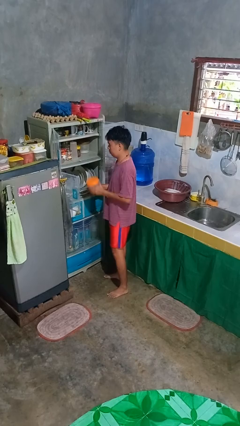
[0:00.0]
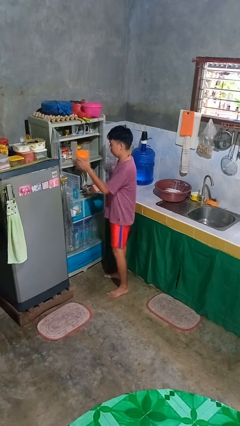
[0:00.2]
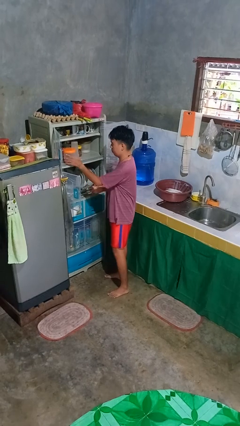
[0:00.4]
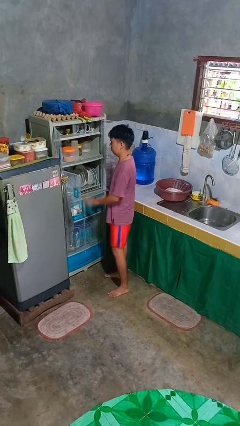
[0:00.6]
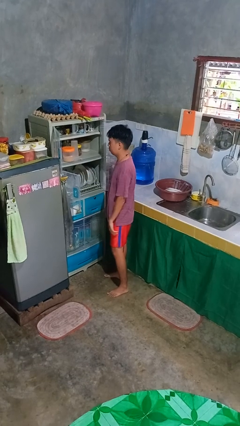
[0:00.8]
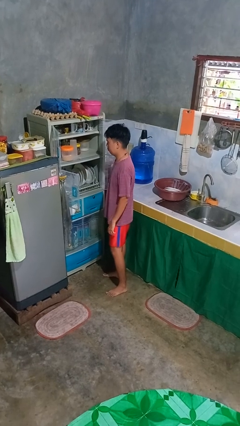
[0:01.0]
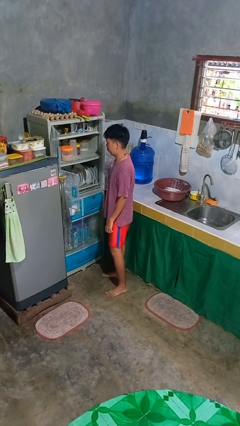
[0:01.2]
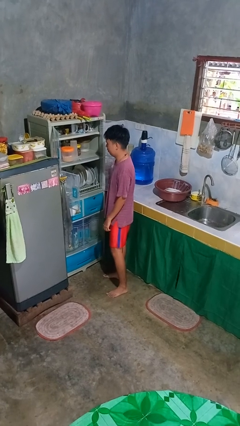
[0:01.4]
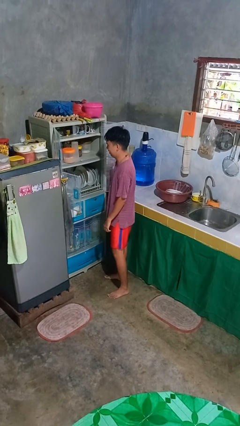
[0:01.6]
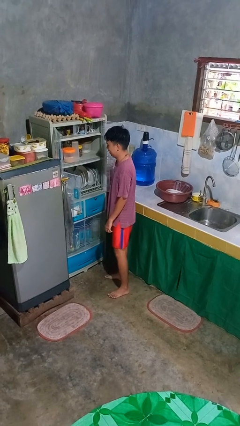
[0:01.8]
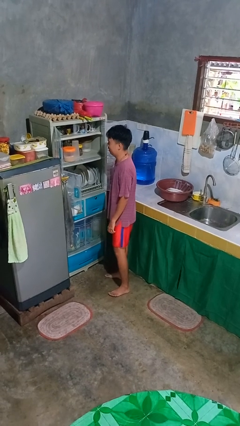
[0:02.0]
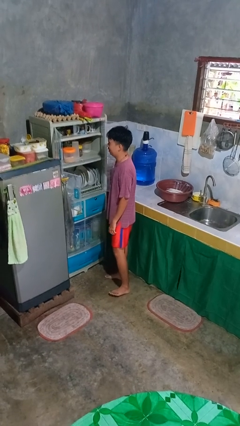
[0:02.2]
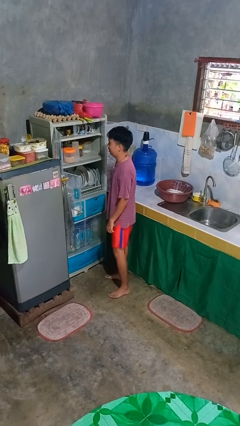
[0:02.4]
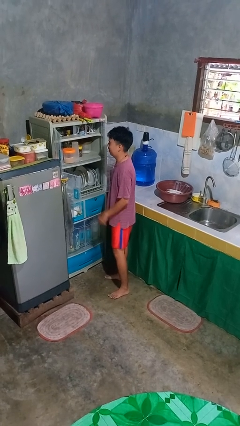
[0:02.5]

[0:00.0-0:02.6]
person puts object in cabinet

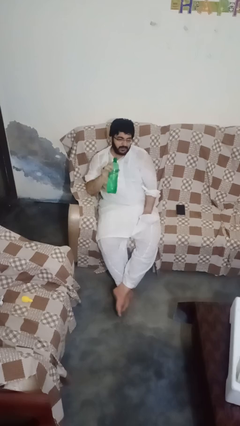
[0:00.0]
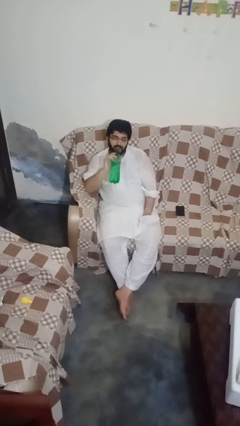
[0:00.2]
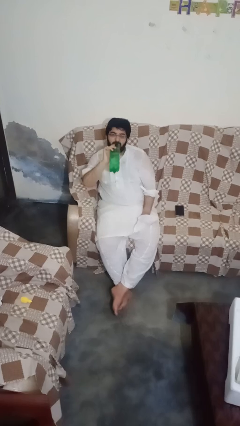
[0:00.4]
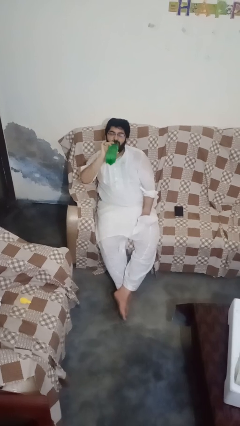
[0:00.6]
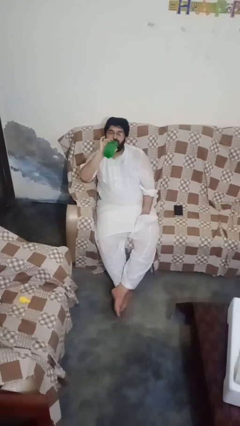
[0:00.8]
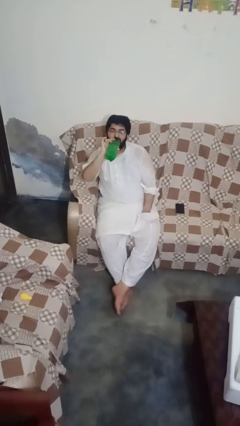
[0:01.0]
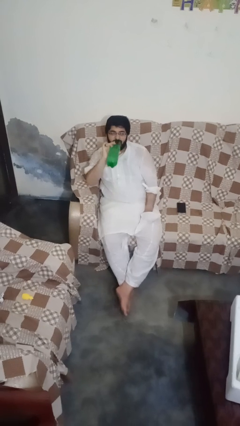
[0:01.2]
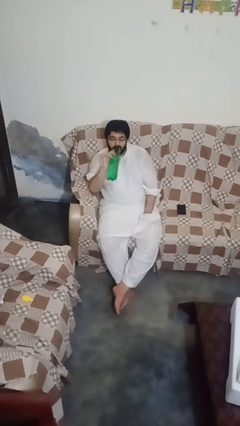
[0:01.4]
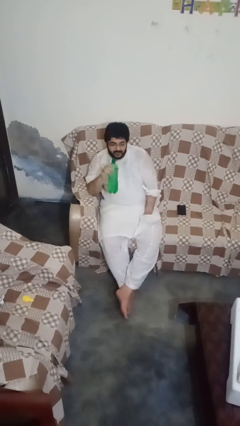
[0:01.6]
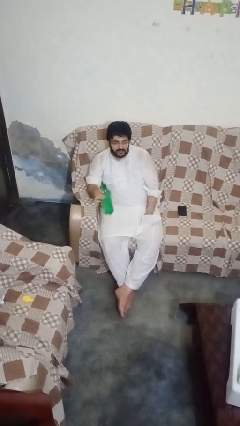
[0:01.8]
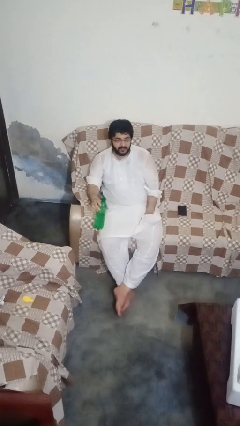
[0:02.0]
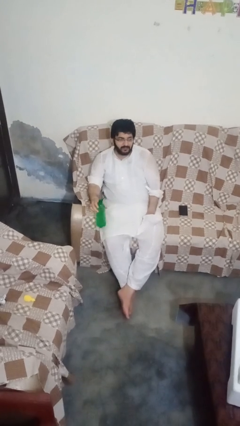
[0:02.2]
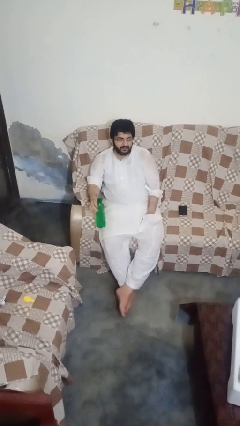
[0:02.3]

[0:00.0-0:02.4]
person drinks from bottle

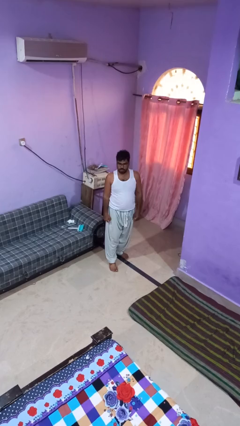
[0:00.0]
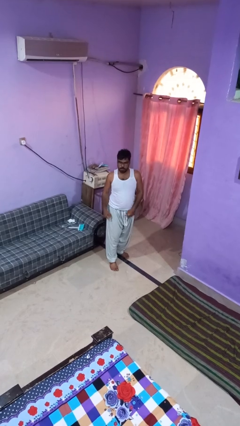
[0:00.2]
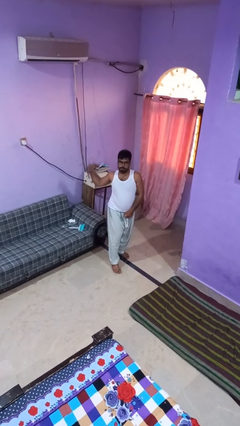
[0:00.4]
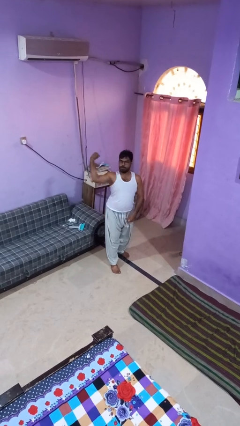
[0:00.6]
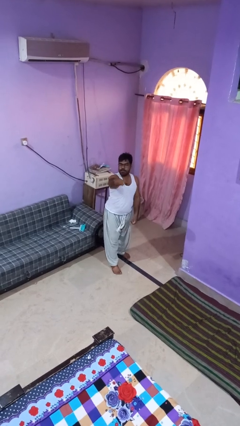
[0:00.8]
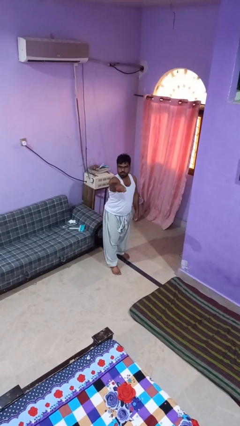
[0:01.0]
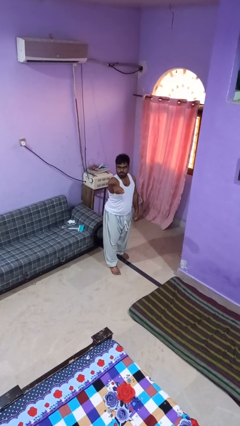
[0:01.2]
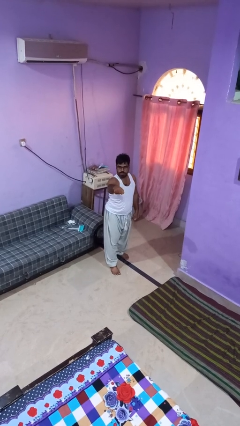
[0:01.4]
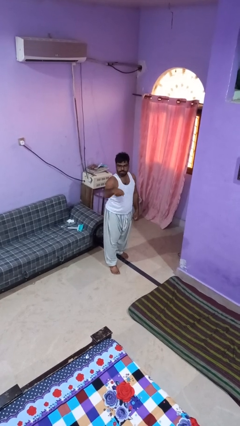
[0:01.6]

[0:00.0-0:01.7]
person punches

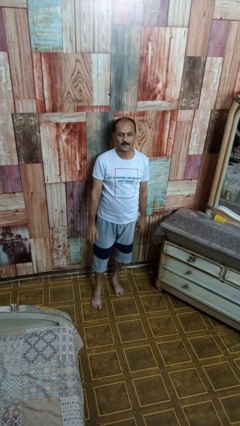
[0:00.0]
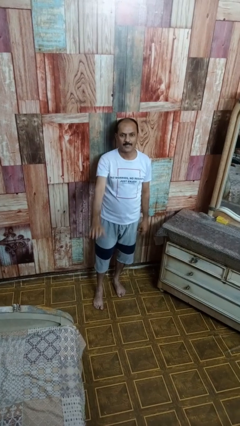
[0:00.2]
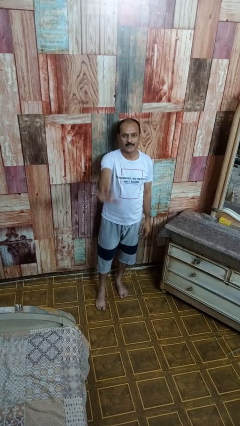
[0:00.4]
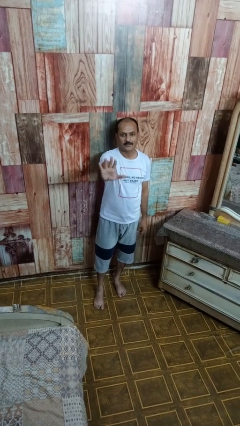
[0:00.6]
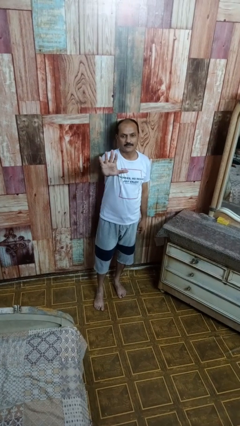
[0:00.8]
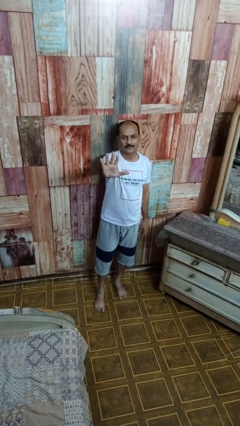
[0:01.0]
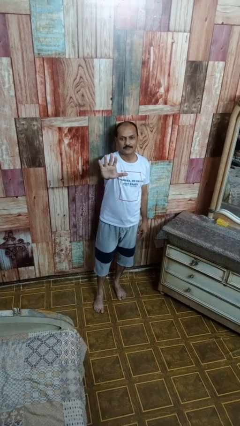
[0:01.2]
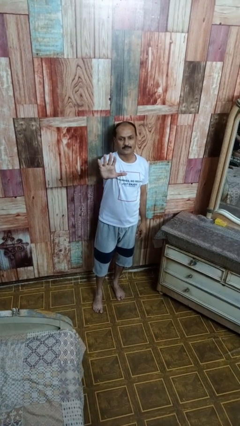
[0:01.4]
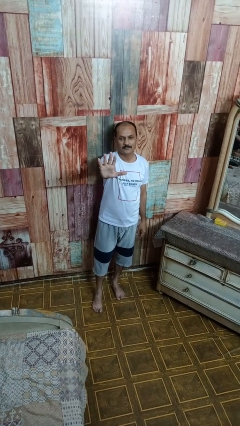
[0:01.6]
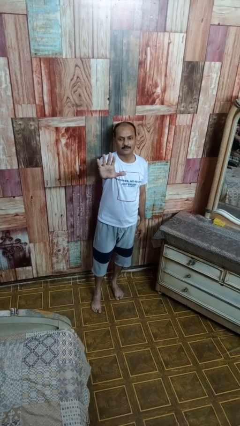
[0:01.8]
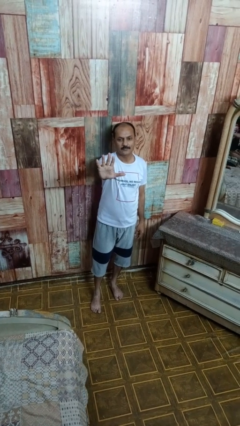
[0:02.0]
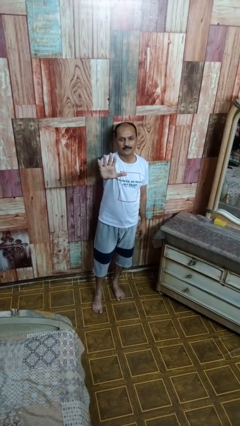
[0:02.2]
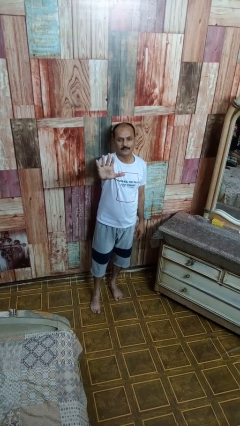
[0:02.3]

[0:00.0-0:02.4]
person gestures number five

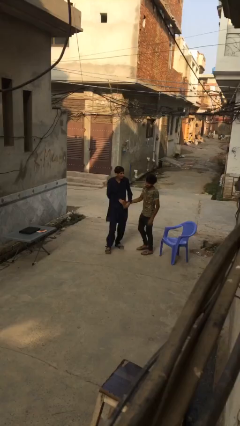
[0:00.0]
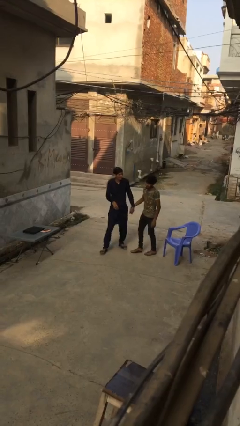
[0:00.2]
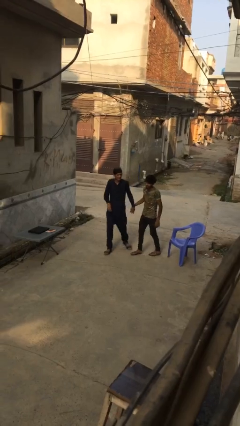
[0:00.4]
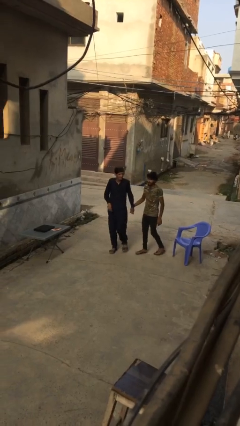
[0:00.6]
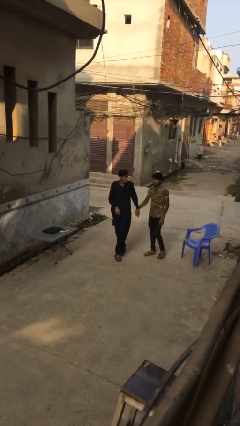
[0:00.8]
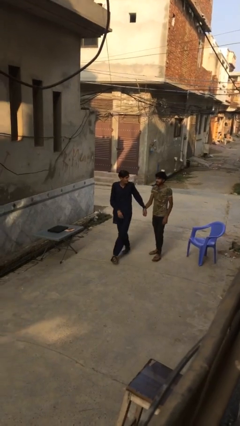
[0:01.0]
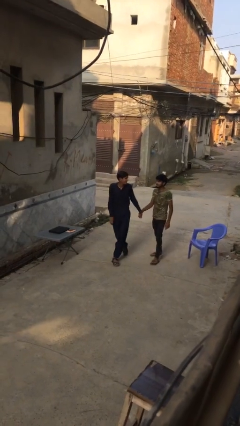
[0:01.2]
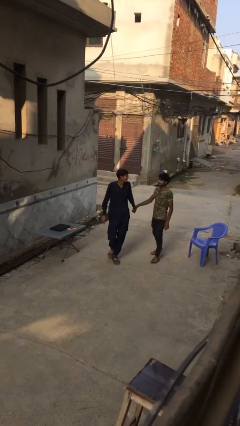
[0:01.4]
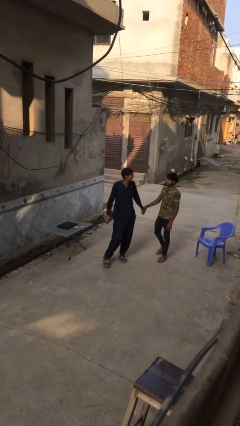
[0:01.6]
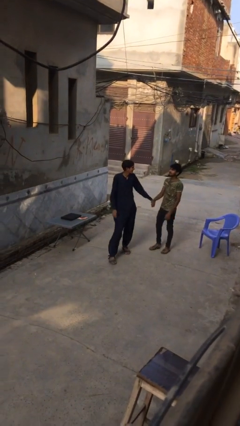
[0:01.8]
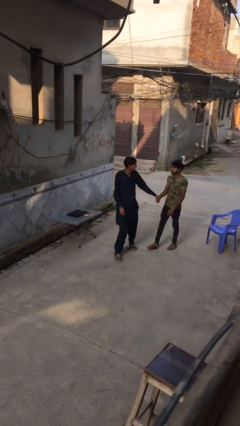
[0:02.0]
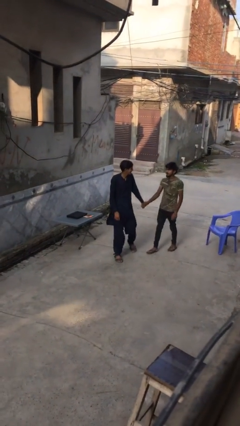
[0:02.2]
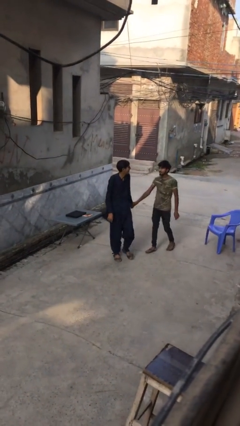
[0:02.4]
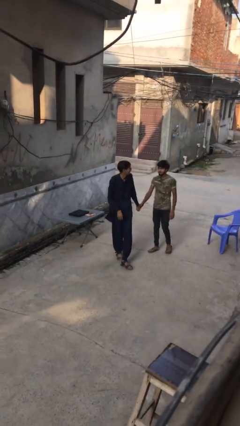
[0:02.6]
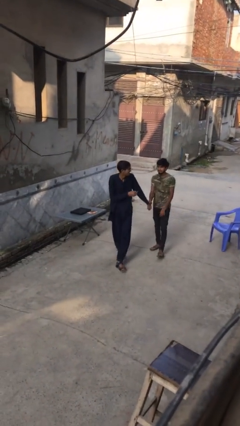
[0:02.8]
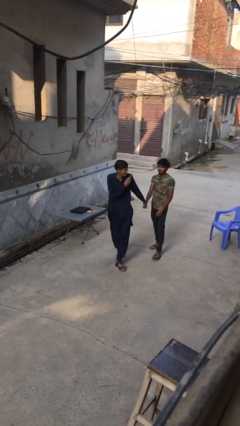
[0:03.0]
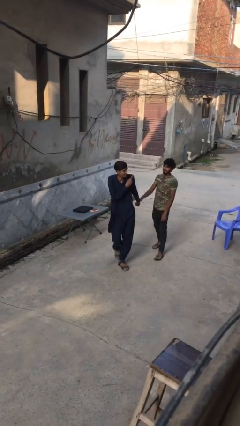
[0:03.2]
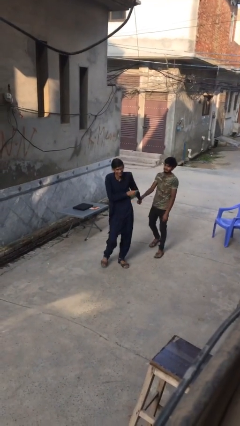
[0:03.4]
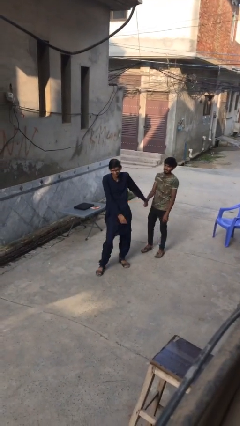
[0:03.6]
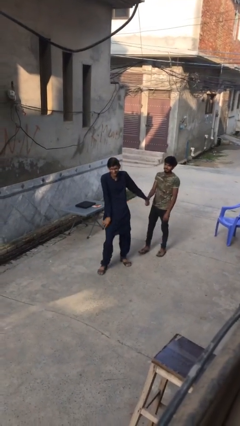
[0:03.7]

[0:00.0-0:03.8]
person talks to person

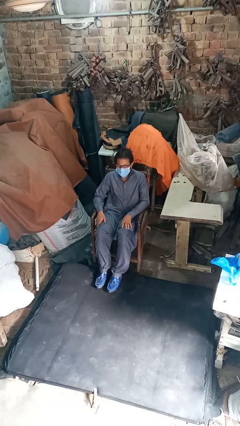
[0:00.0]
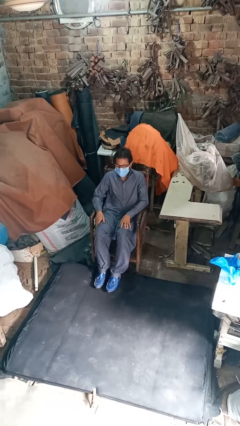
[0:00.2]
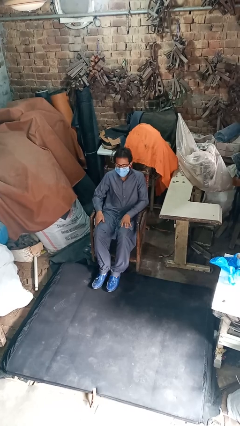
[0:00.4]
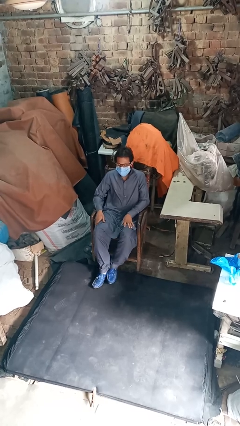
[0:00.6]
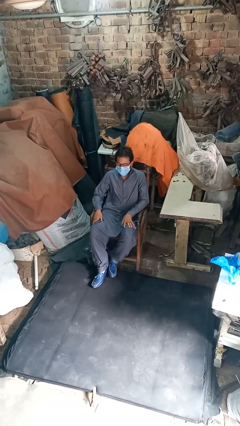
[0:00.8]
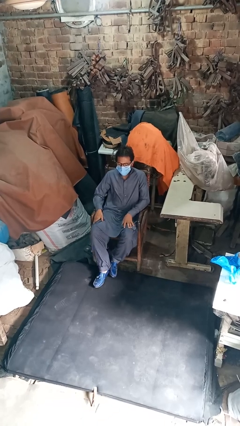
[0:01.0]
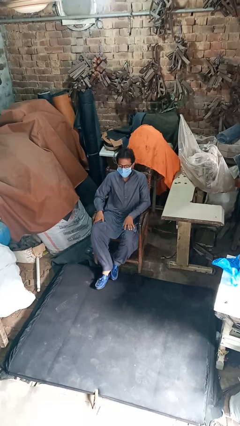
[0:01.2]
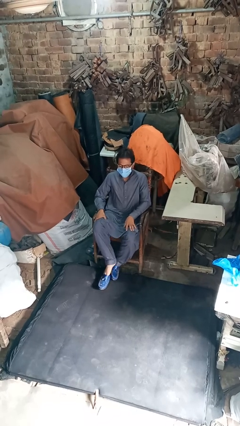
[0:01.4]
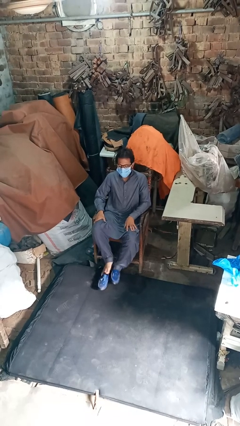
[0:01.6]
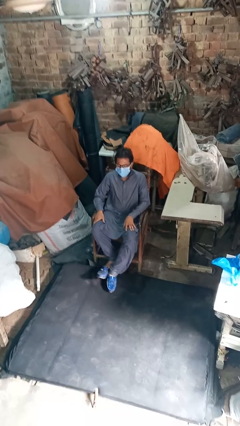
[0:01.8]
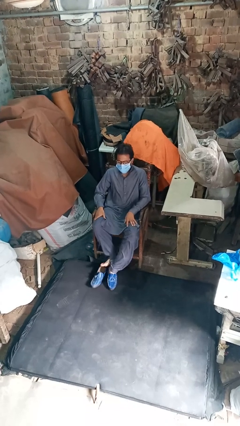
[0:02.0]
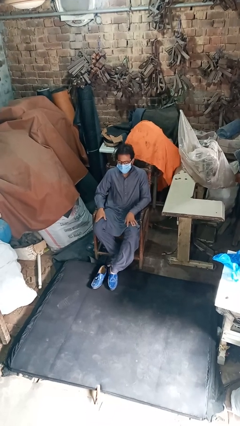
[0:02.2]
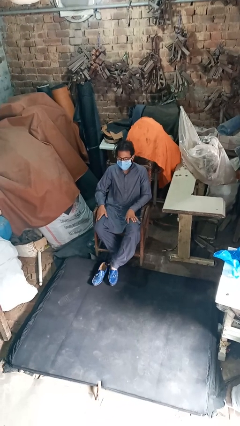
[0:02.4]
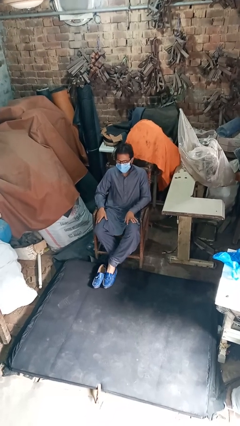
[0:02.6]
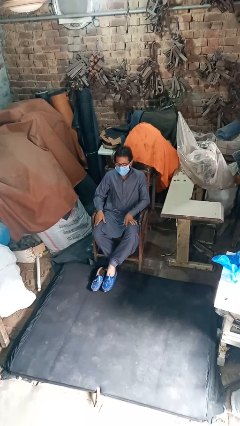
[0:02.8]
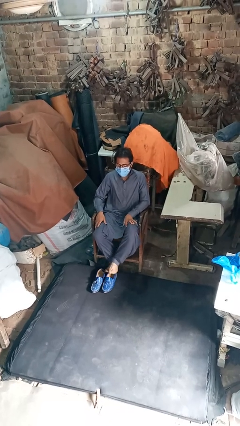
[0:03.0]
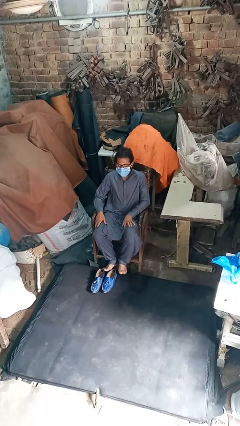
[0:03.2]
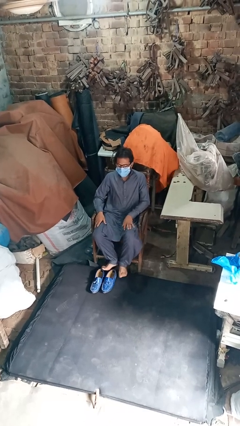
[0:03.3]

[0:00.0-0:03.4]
person takes off shoes

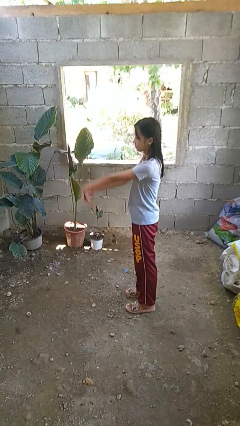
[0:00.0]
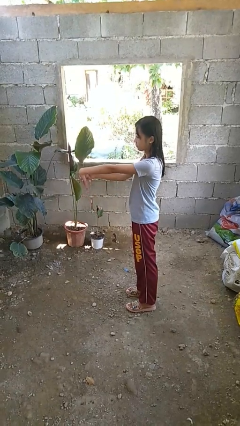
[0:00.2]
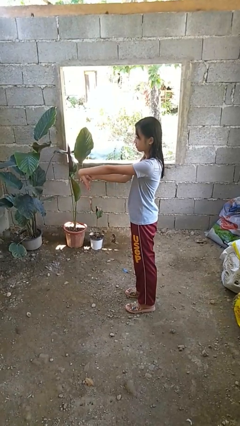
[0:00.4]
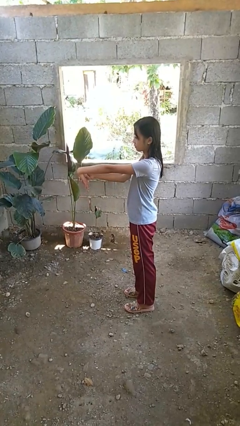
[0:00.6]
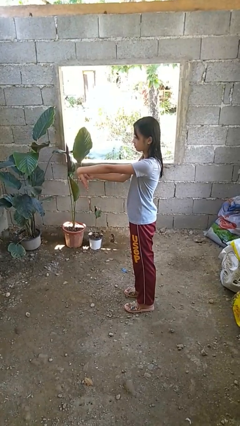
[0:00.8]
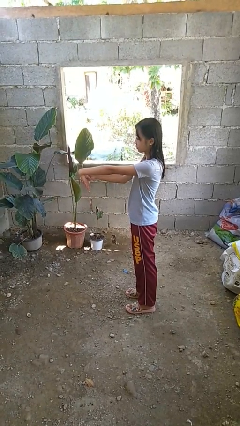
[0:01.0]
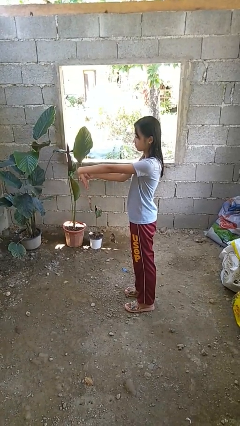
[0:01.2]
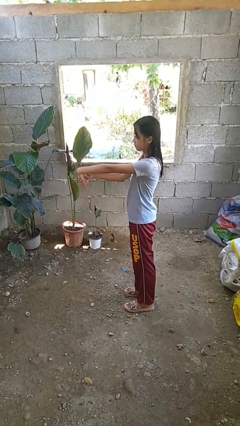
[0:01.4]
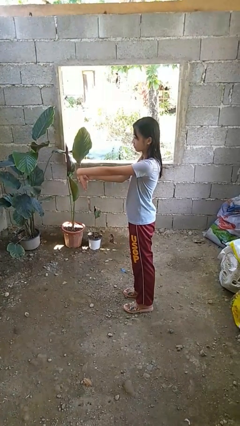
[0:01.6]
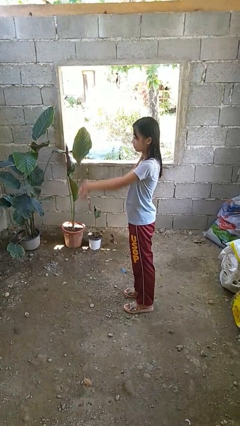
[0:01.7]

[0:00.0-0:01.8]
person cracks knuckles
